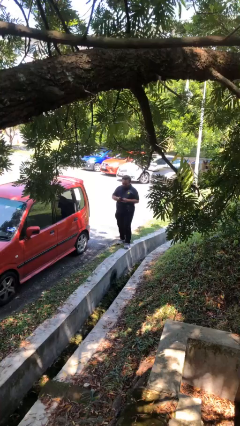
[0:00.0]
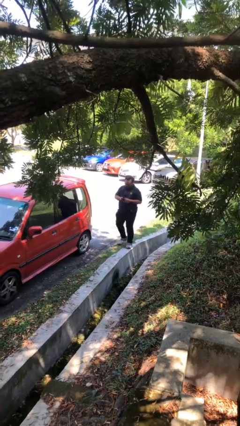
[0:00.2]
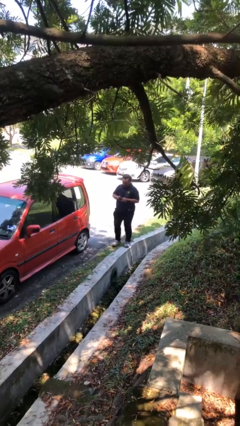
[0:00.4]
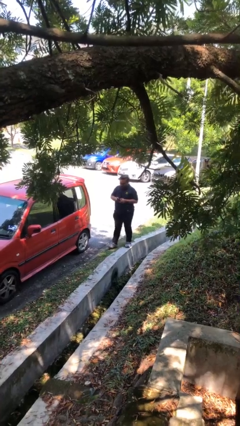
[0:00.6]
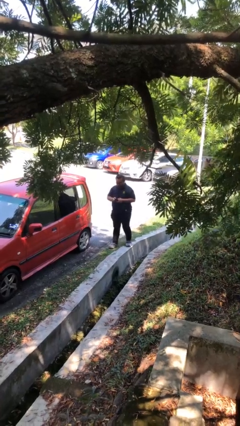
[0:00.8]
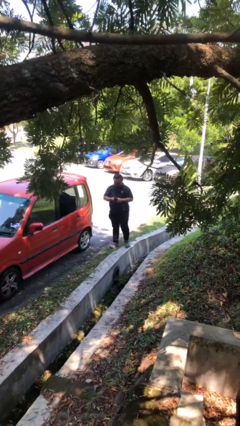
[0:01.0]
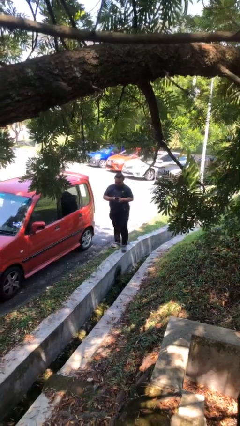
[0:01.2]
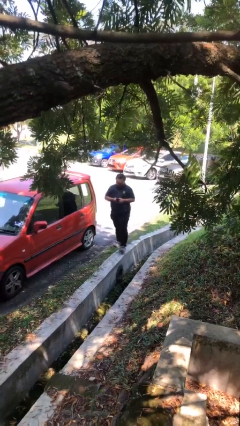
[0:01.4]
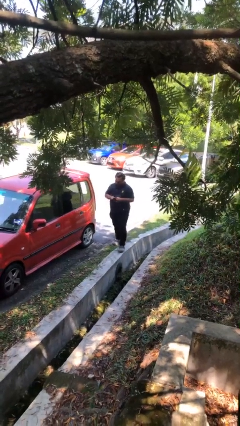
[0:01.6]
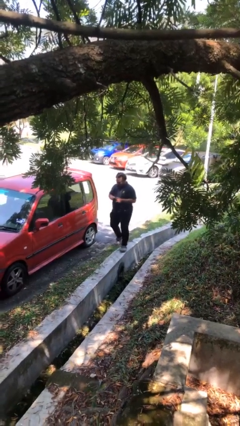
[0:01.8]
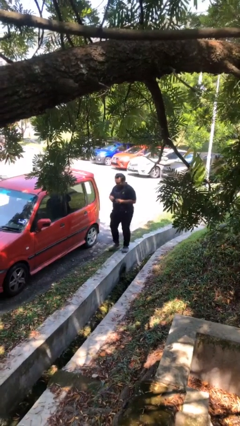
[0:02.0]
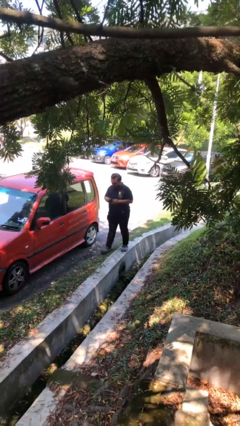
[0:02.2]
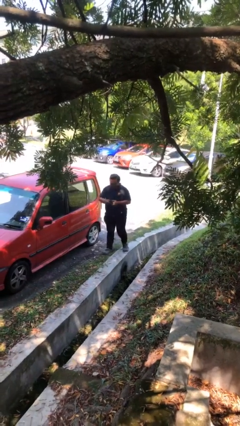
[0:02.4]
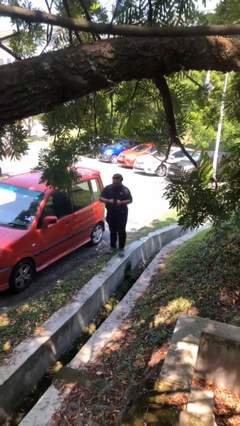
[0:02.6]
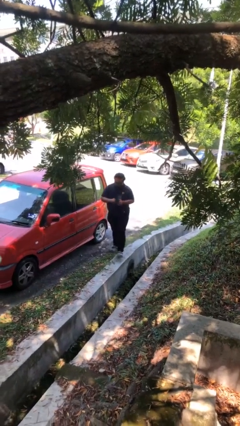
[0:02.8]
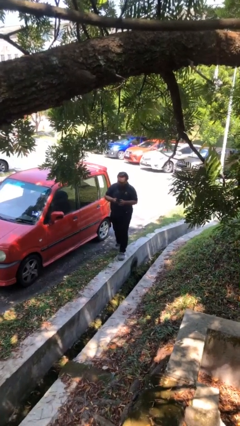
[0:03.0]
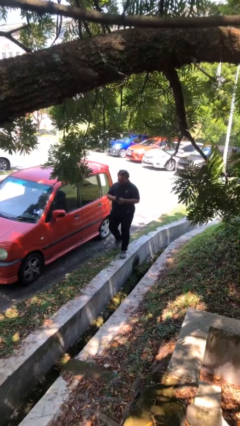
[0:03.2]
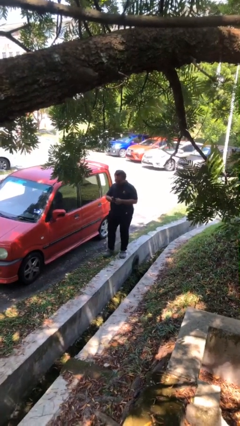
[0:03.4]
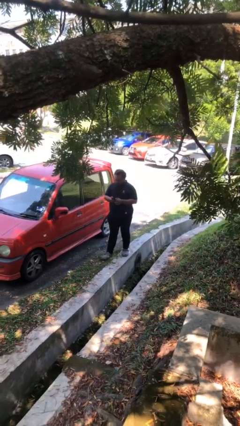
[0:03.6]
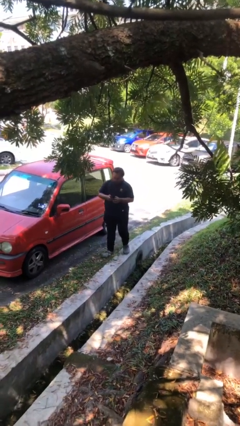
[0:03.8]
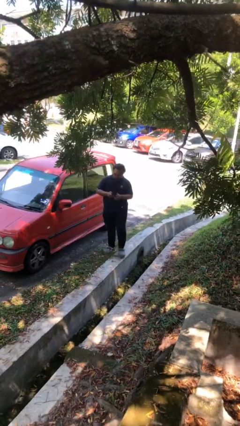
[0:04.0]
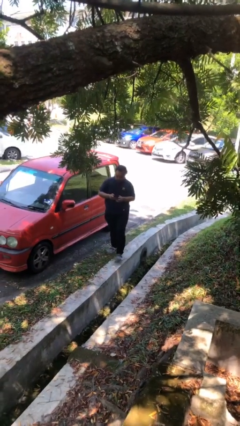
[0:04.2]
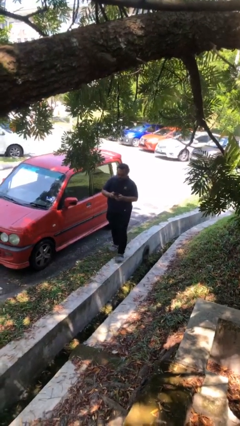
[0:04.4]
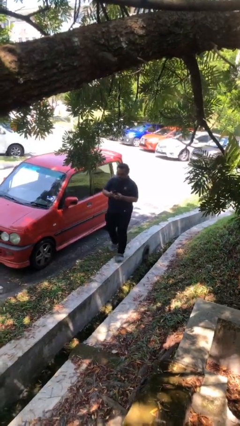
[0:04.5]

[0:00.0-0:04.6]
person texts on phone

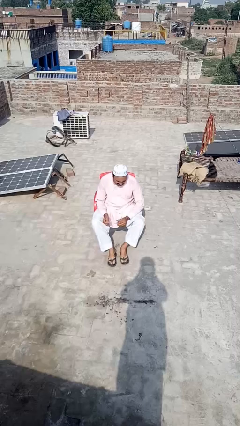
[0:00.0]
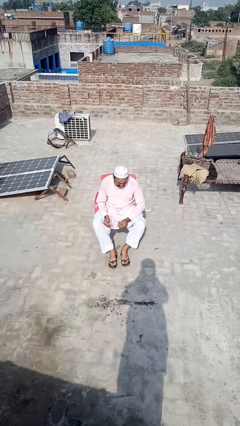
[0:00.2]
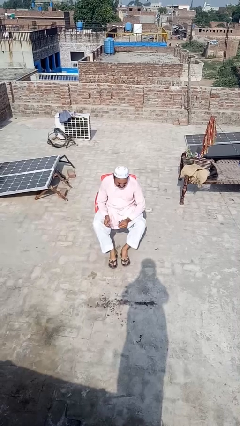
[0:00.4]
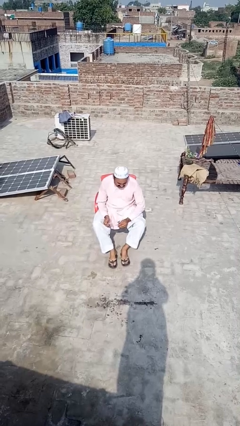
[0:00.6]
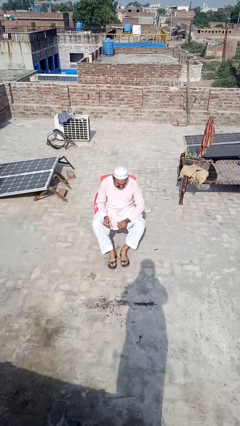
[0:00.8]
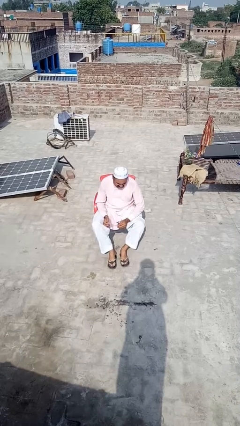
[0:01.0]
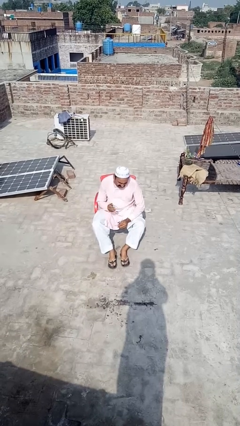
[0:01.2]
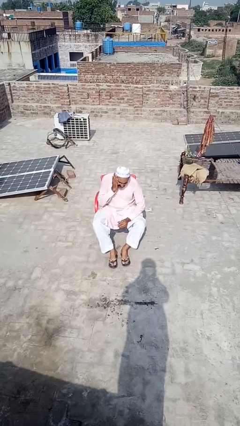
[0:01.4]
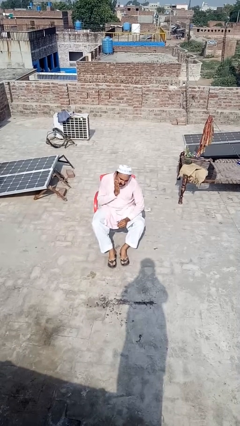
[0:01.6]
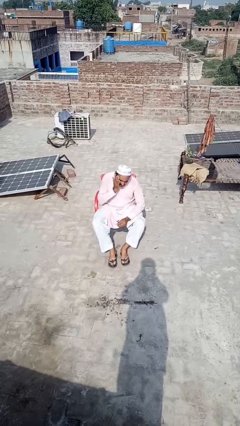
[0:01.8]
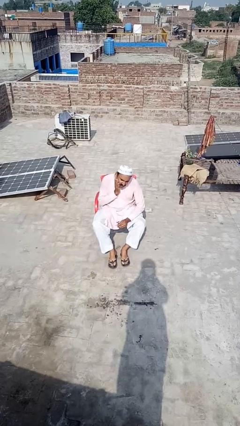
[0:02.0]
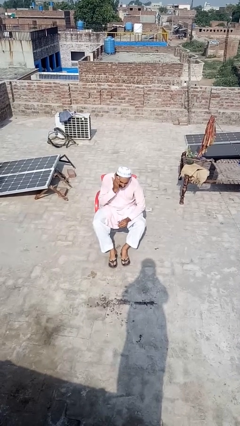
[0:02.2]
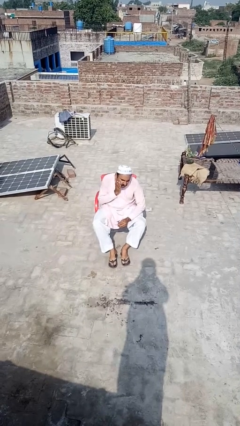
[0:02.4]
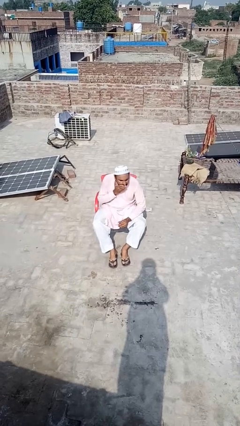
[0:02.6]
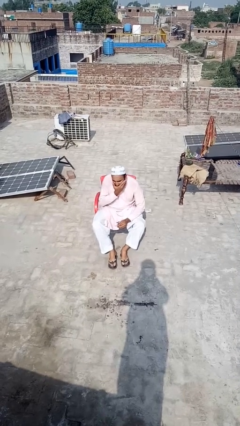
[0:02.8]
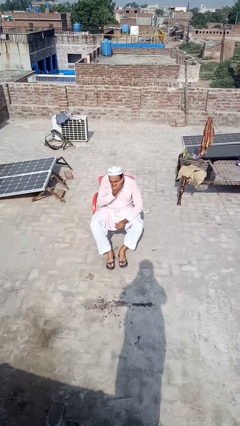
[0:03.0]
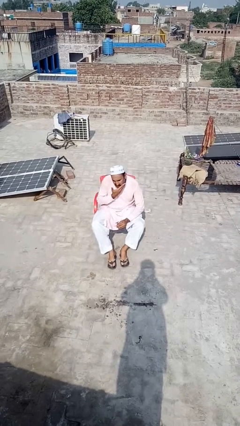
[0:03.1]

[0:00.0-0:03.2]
person applies shaving cream

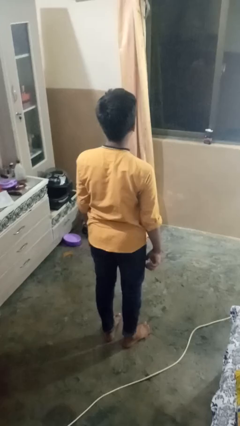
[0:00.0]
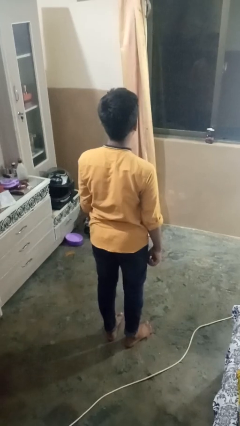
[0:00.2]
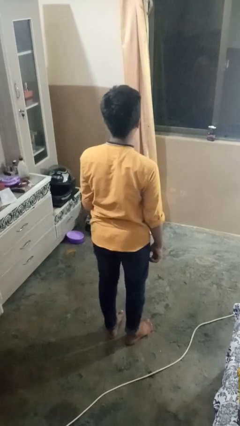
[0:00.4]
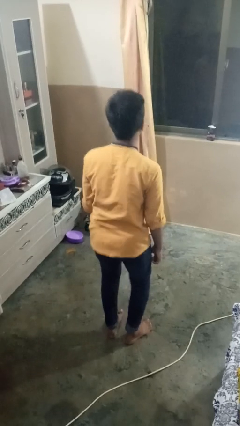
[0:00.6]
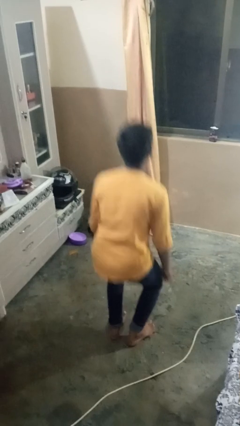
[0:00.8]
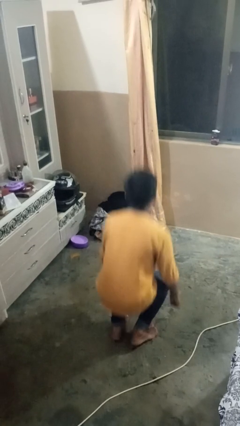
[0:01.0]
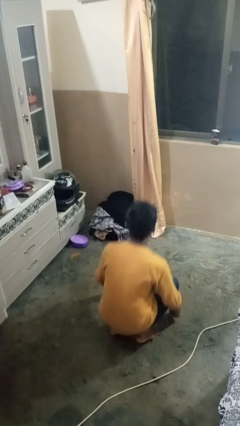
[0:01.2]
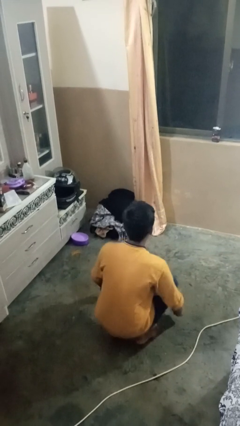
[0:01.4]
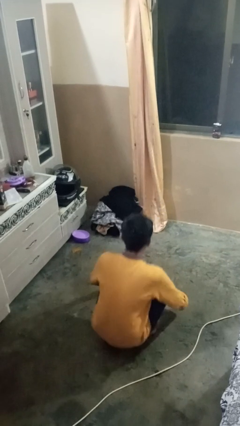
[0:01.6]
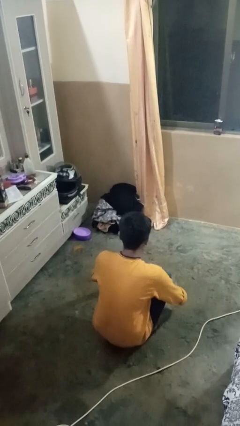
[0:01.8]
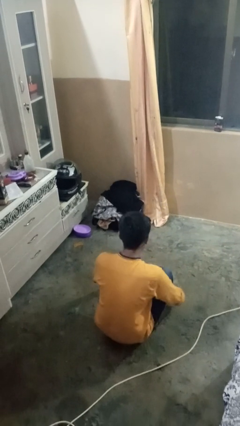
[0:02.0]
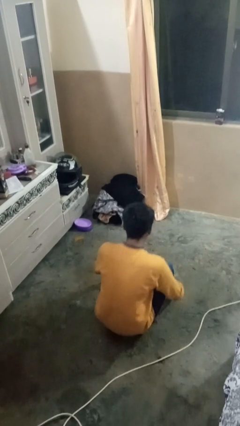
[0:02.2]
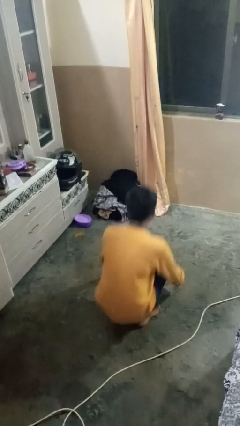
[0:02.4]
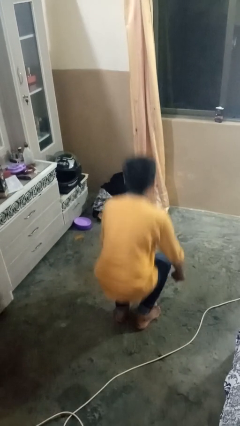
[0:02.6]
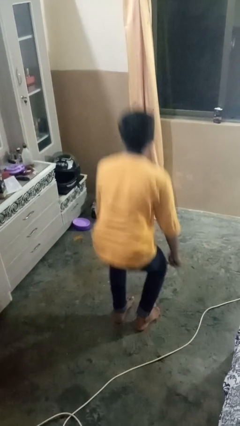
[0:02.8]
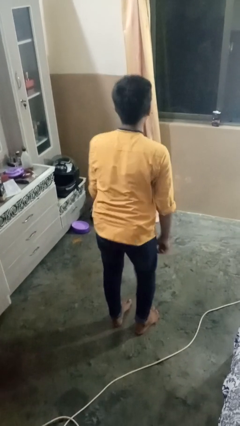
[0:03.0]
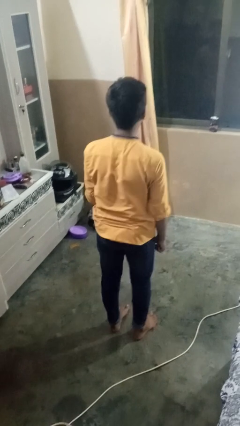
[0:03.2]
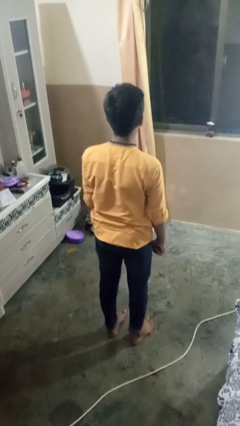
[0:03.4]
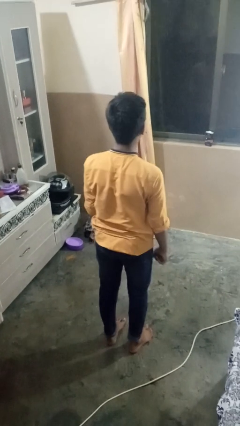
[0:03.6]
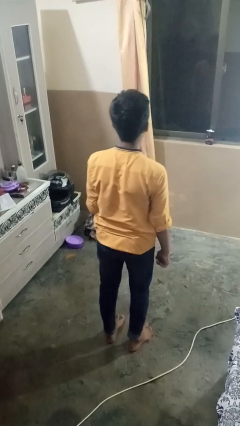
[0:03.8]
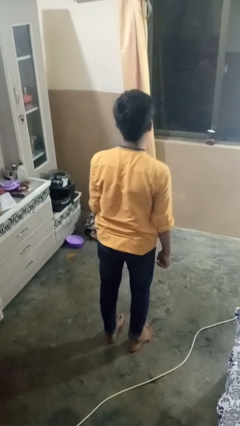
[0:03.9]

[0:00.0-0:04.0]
person exercises with situp

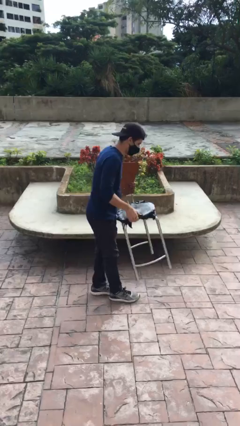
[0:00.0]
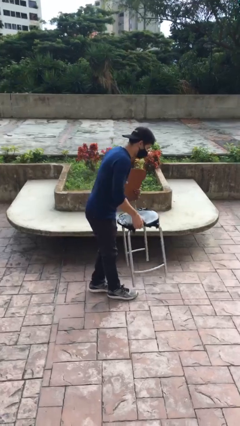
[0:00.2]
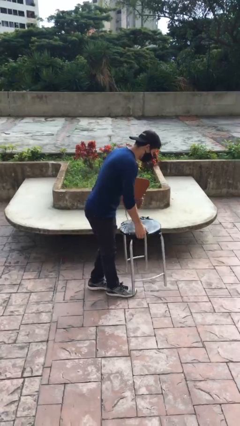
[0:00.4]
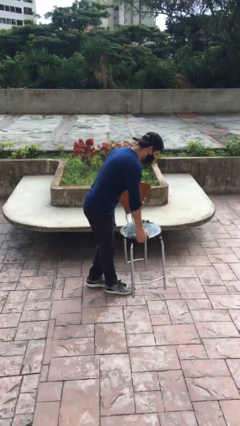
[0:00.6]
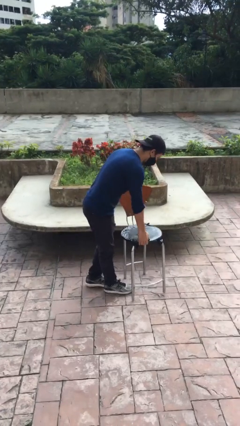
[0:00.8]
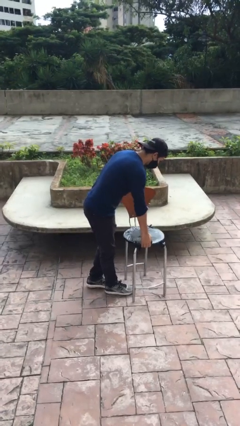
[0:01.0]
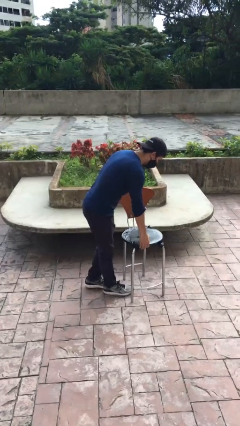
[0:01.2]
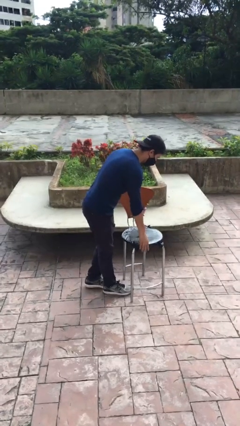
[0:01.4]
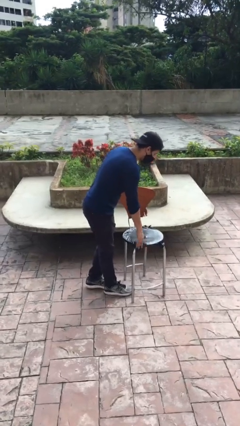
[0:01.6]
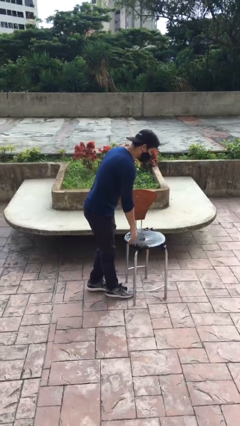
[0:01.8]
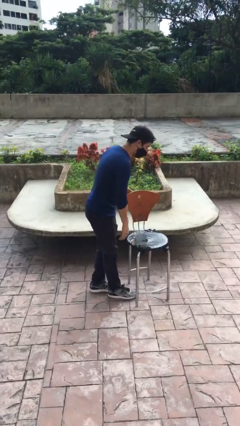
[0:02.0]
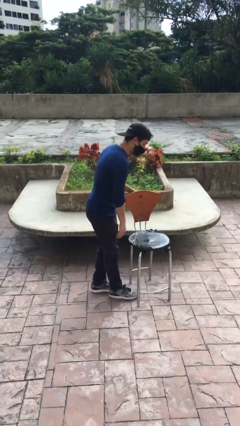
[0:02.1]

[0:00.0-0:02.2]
person puts down object on floor

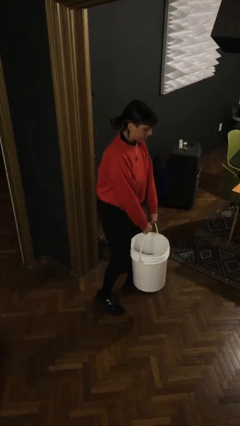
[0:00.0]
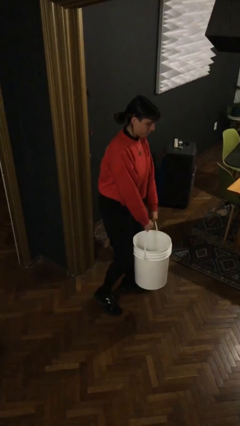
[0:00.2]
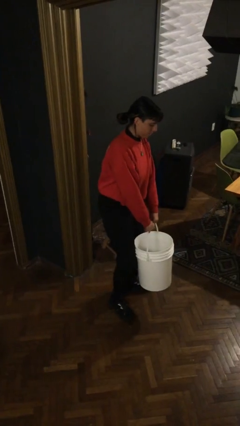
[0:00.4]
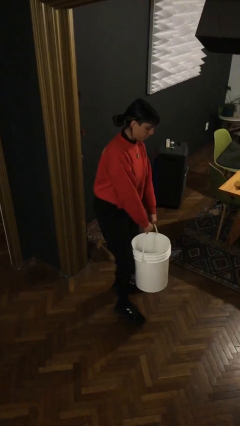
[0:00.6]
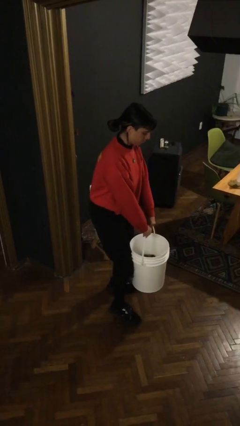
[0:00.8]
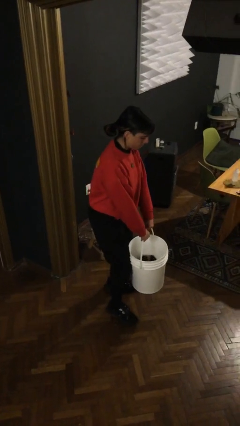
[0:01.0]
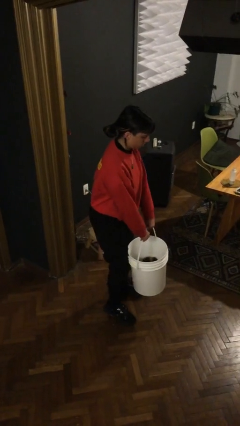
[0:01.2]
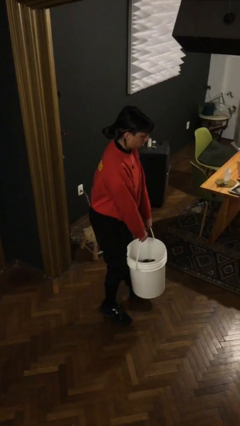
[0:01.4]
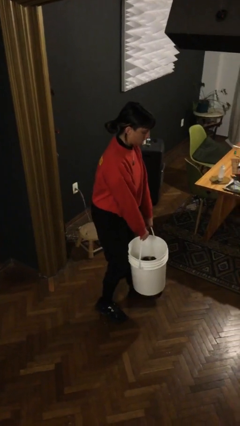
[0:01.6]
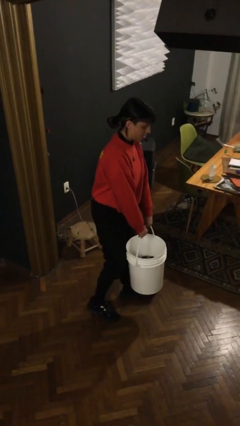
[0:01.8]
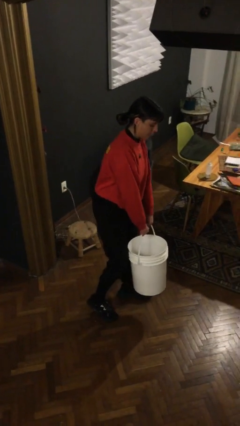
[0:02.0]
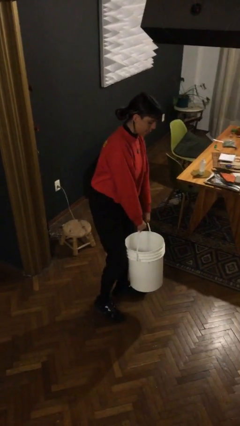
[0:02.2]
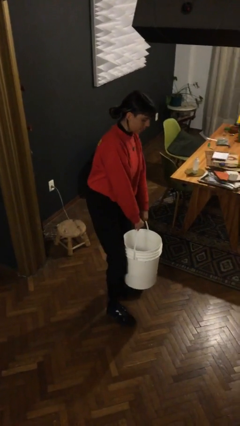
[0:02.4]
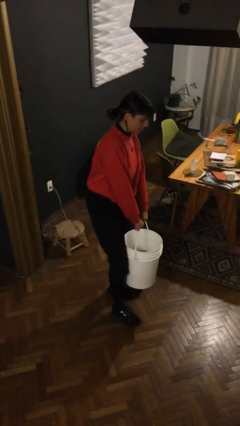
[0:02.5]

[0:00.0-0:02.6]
person carries heavy object

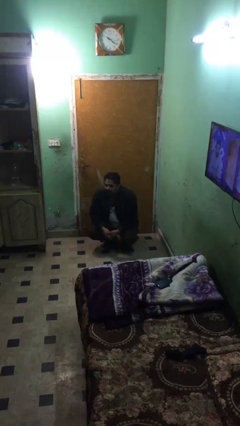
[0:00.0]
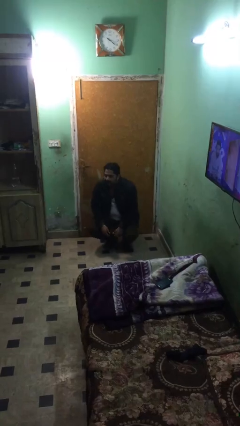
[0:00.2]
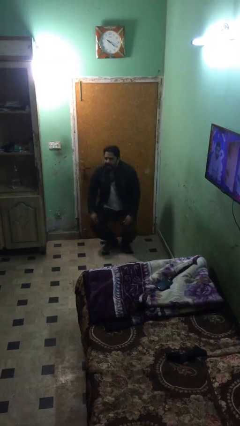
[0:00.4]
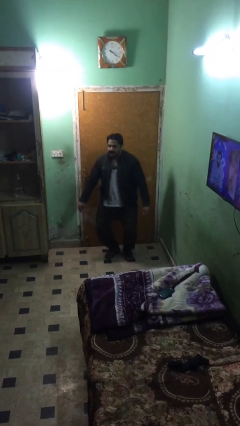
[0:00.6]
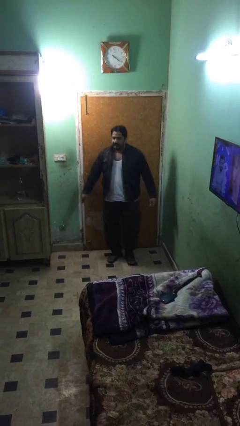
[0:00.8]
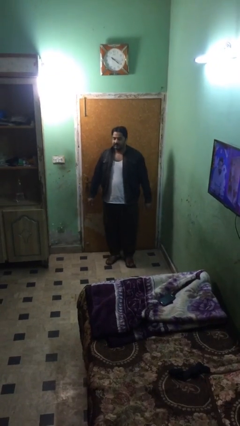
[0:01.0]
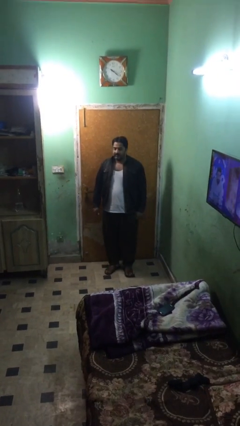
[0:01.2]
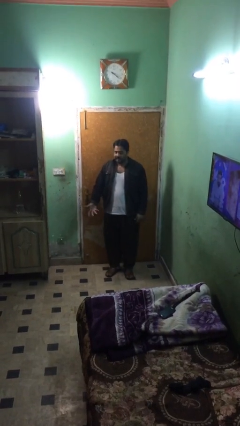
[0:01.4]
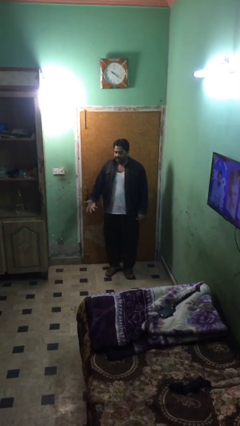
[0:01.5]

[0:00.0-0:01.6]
person stands up
